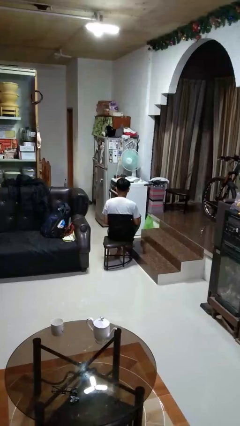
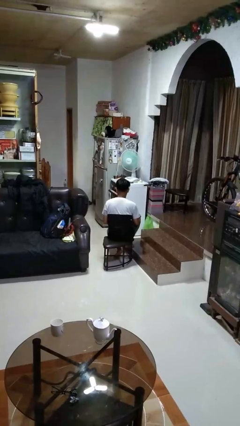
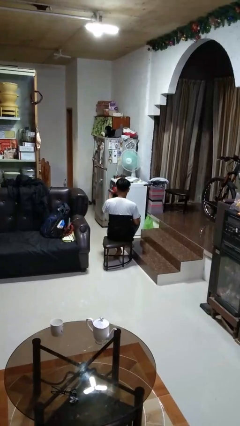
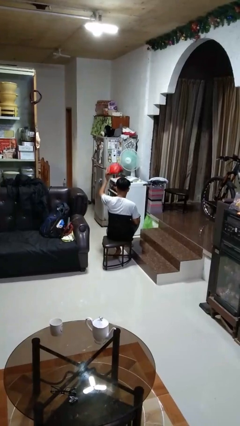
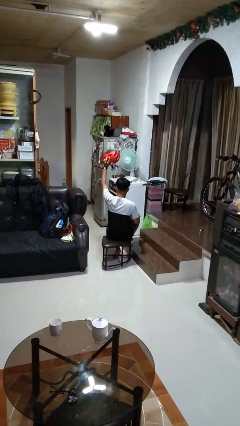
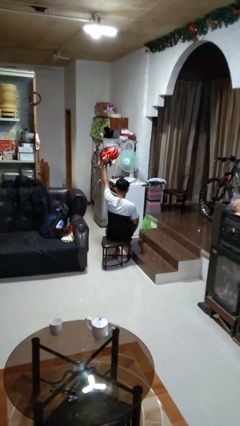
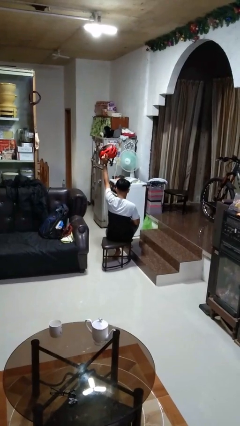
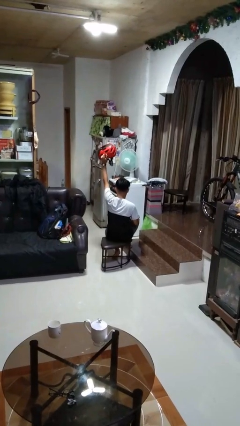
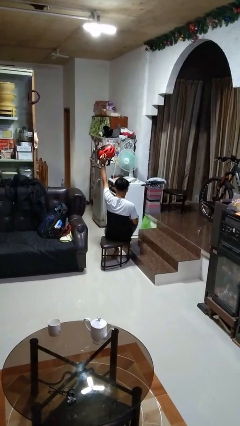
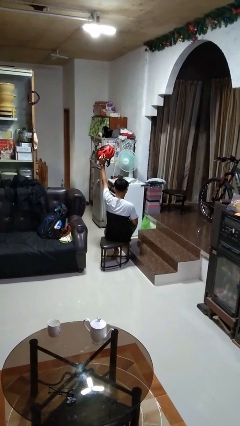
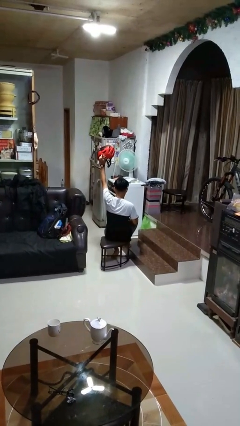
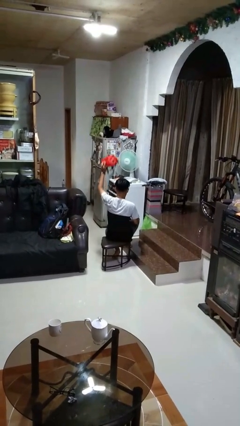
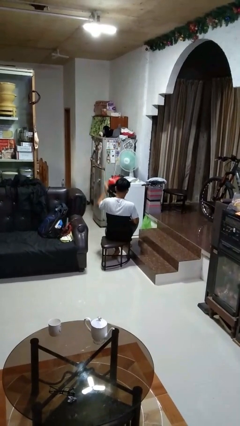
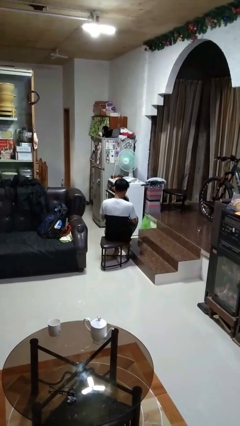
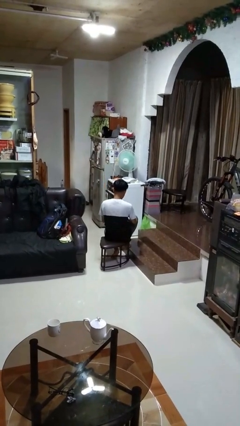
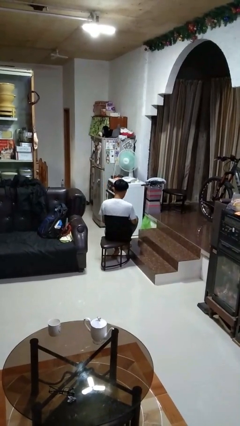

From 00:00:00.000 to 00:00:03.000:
person holds object above head

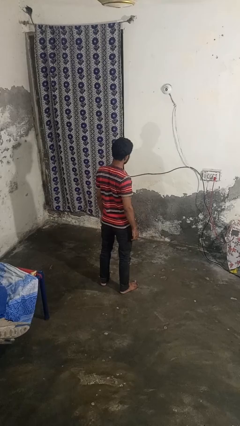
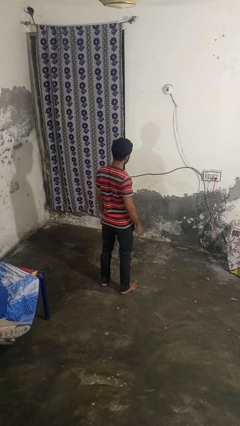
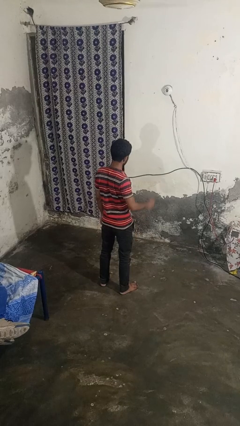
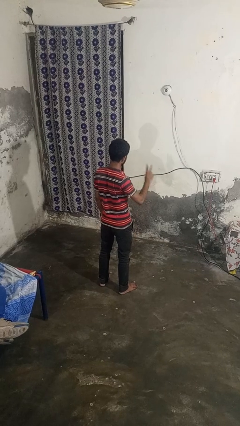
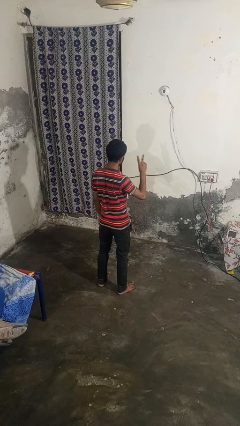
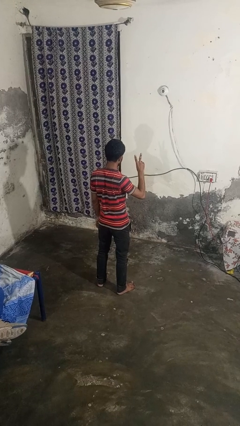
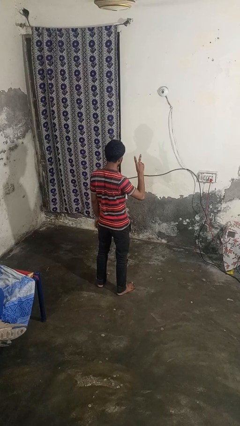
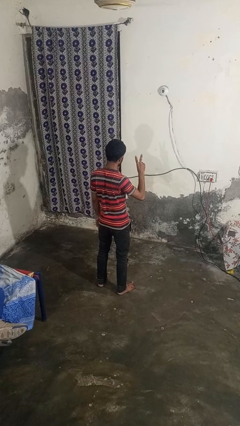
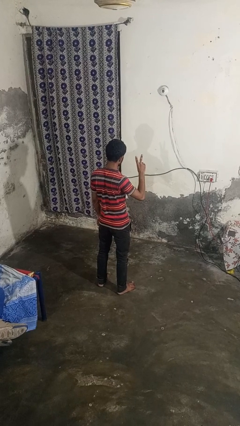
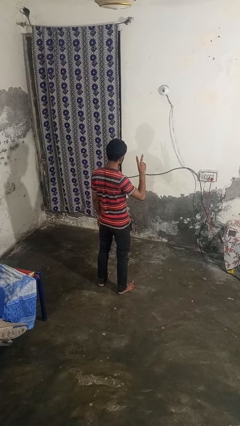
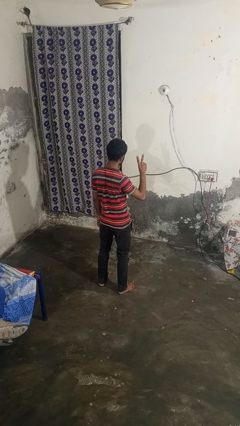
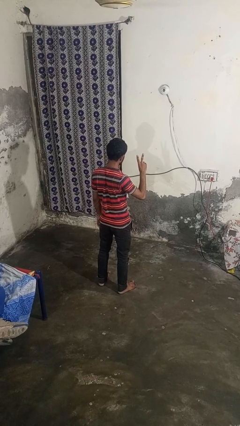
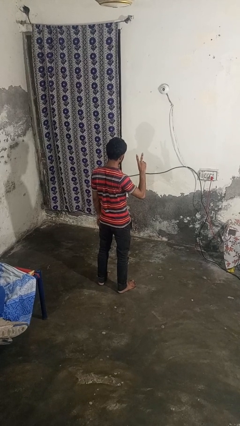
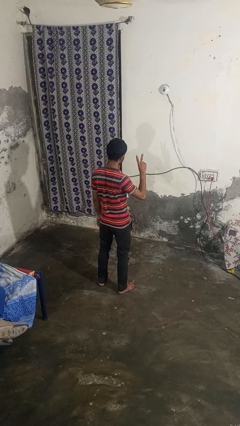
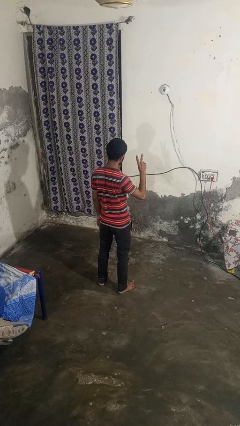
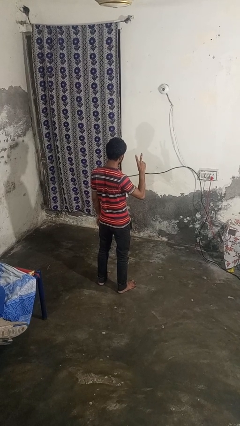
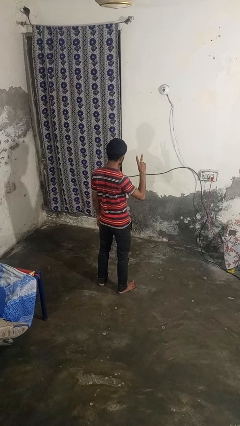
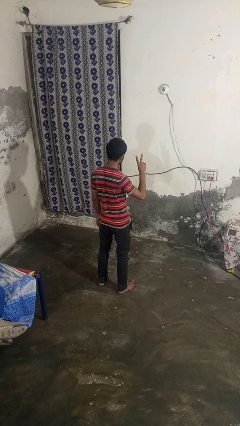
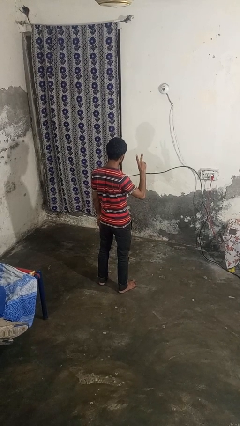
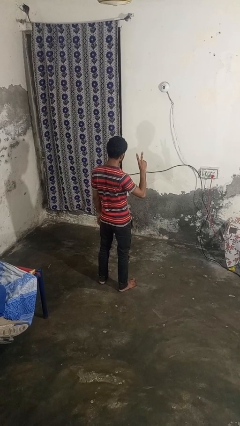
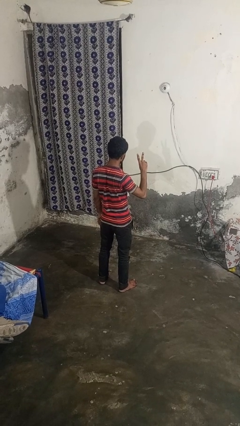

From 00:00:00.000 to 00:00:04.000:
person gestures peace

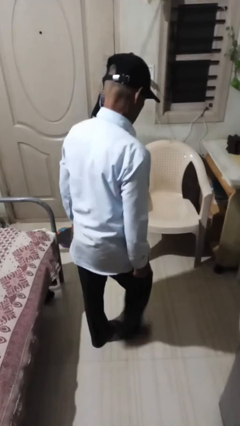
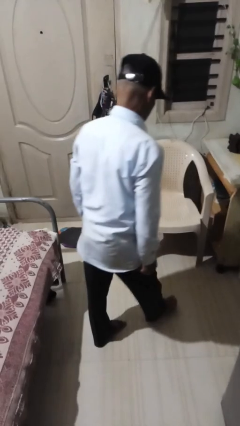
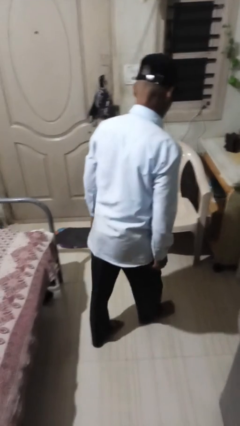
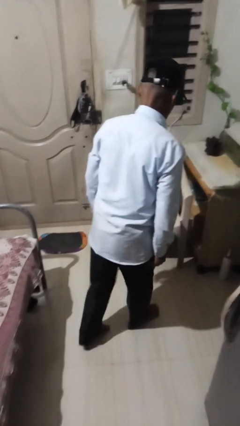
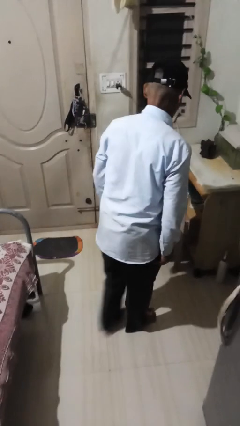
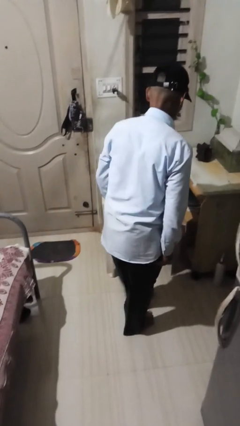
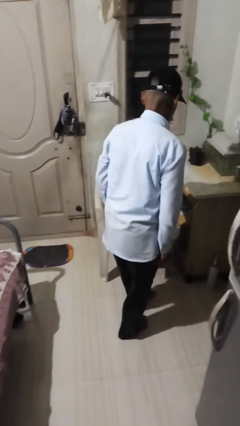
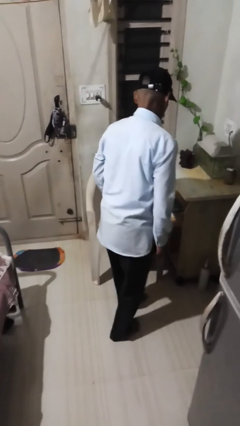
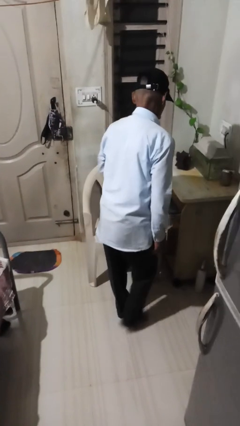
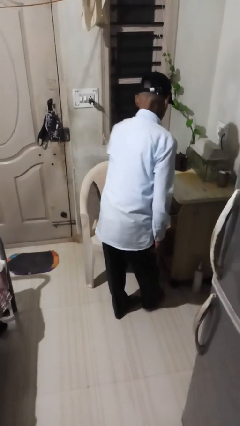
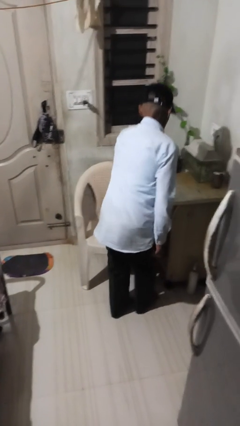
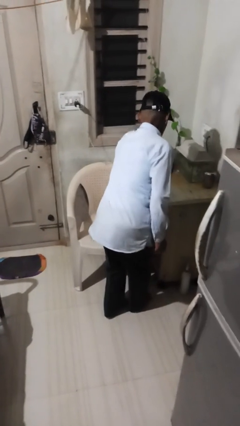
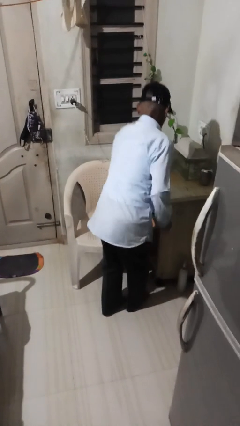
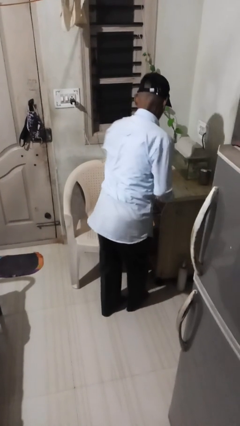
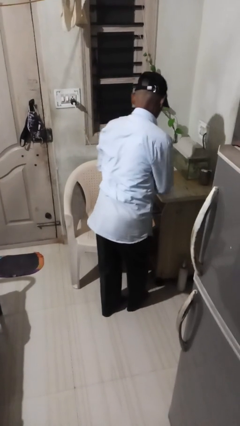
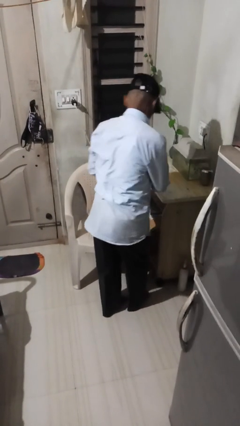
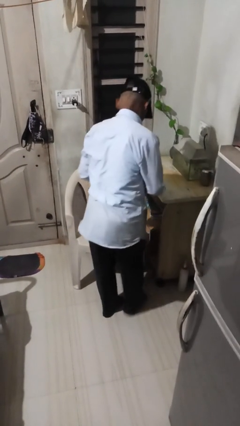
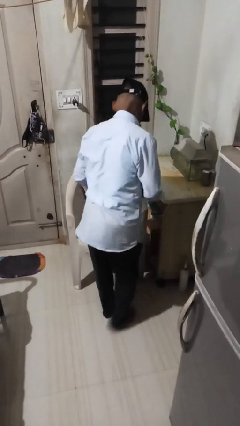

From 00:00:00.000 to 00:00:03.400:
person picks up object from table

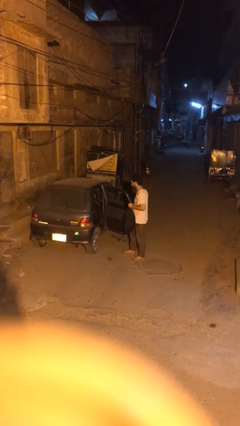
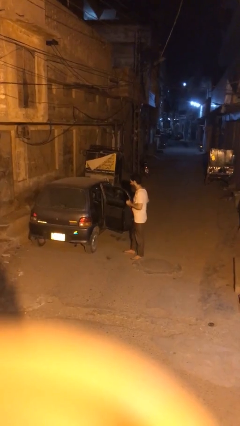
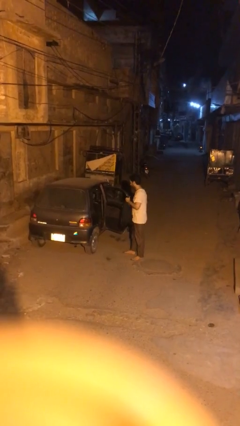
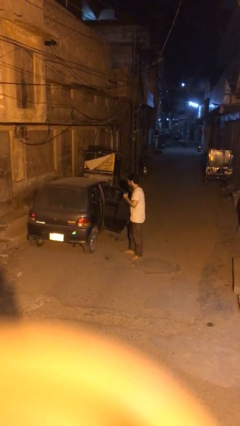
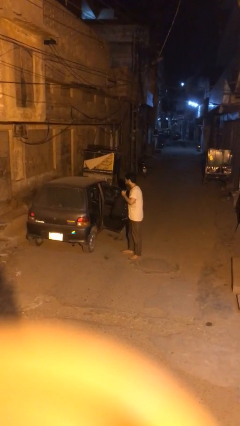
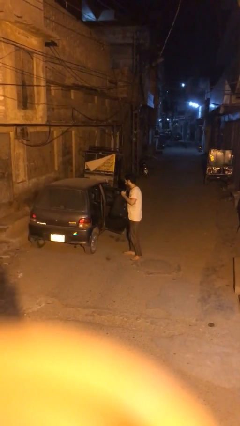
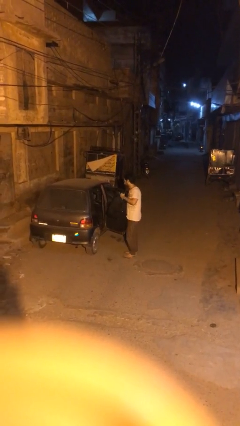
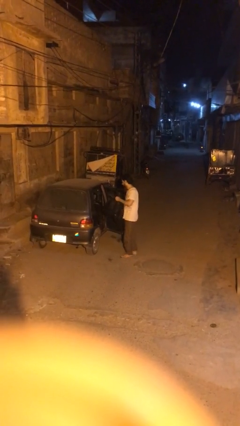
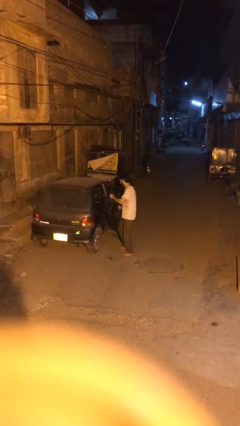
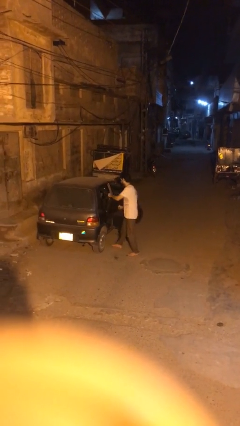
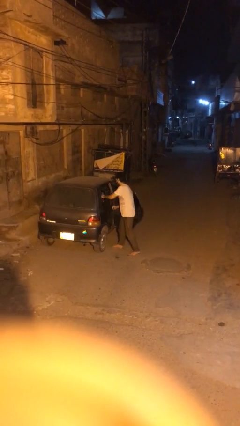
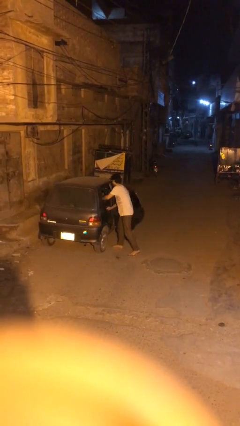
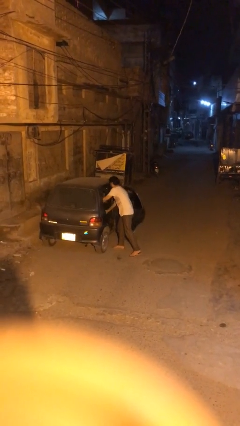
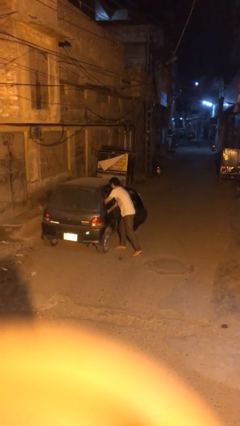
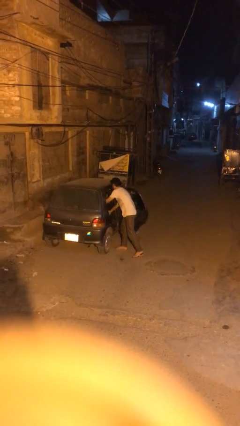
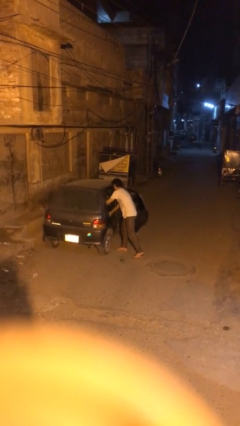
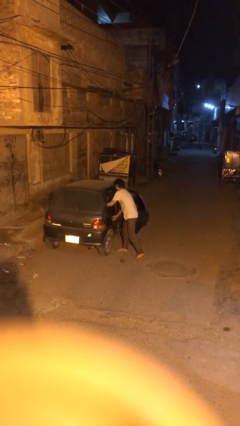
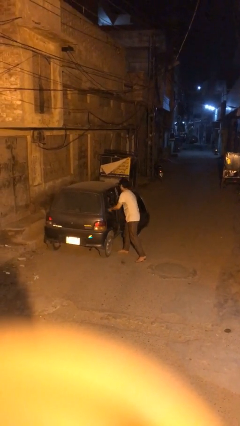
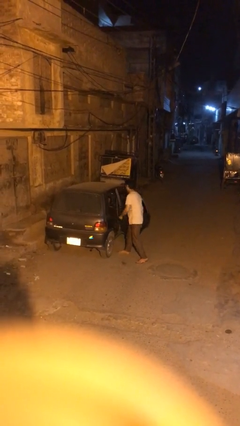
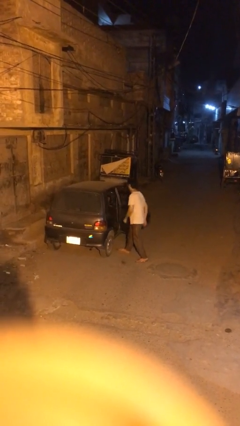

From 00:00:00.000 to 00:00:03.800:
person loads car

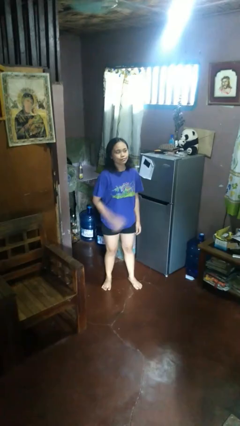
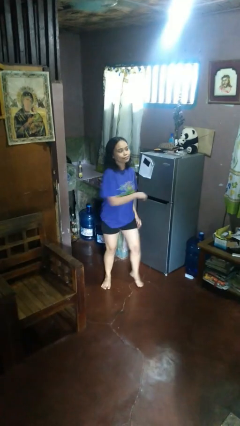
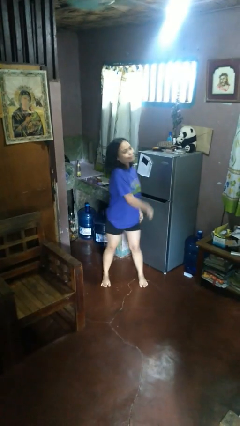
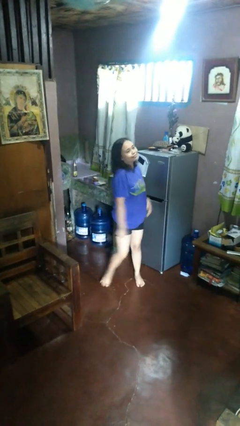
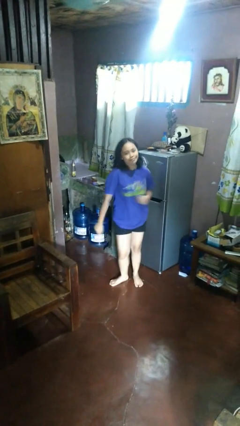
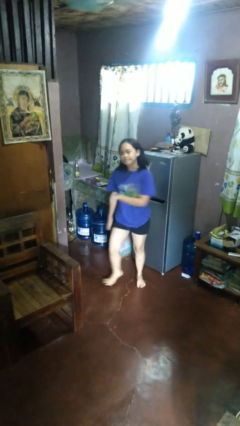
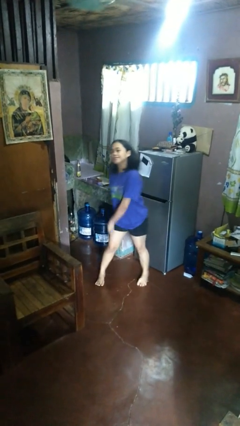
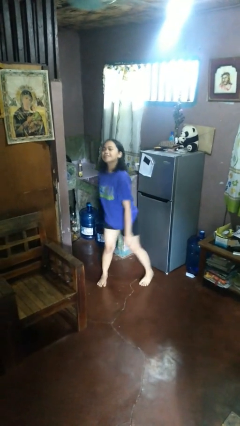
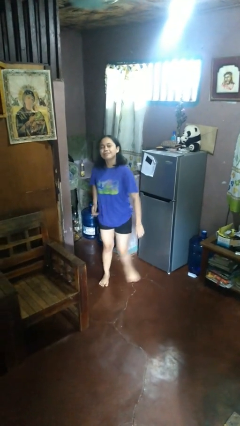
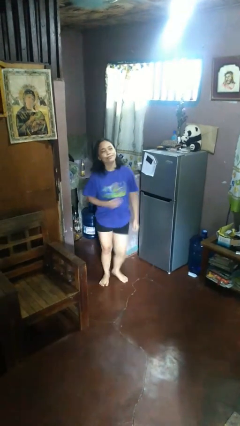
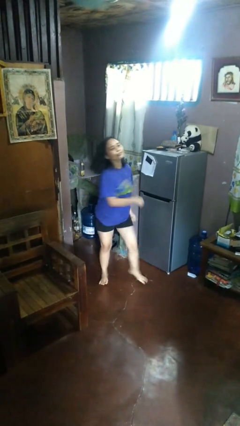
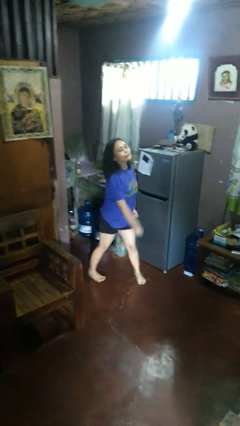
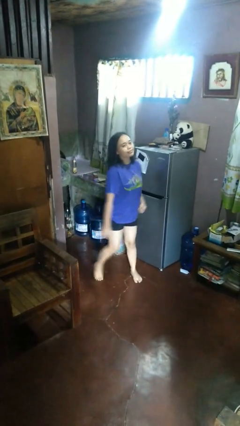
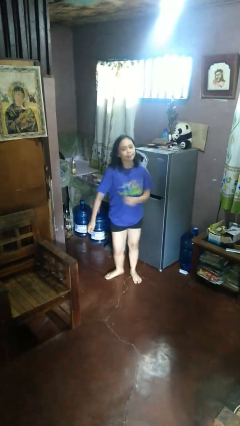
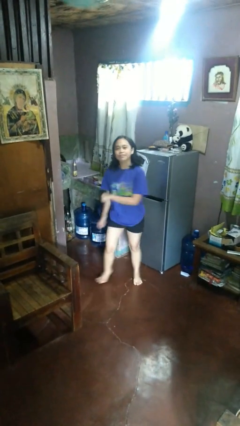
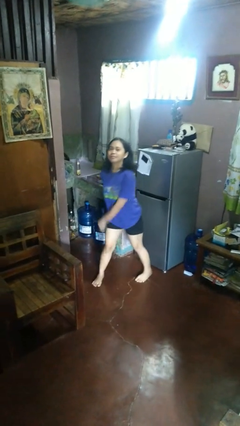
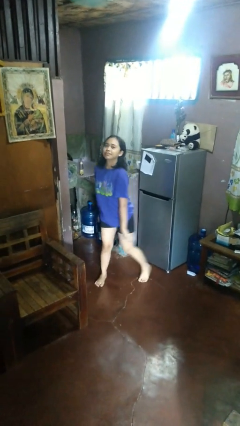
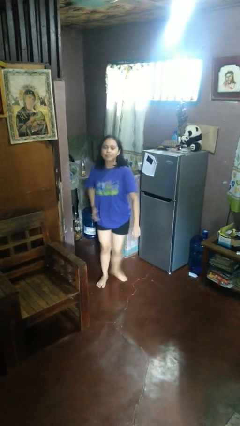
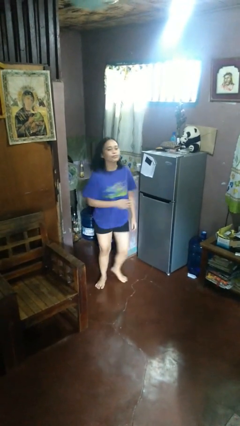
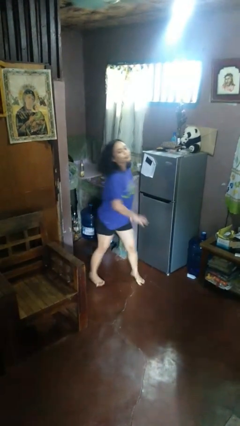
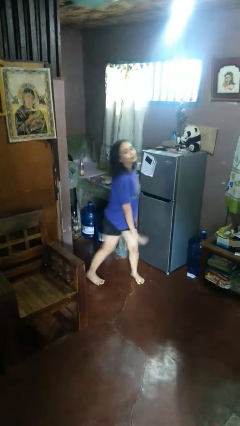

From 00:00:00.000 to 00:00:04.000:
person dances in place

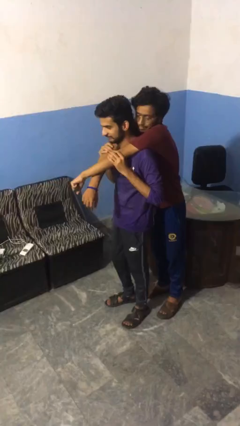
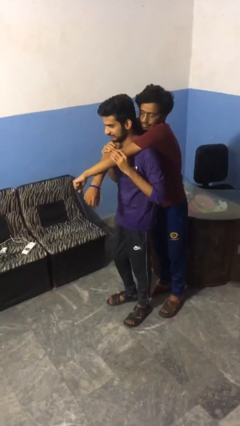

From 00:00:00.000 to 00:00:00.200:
person carries person on back
